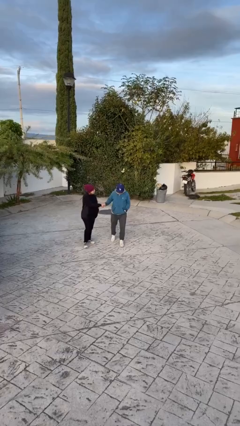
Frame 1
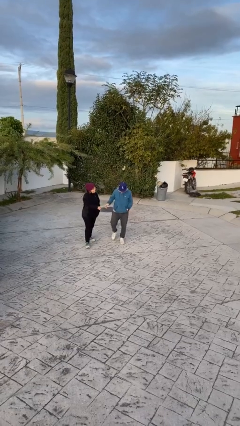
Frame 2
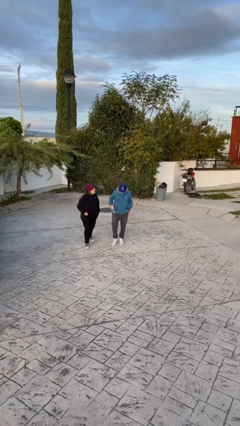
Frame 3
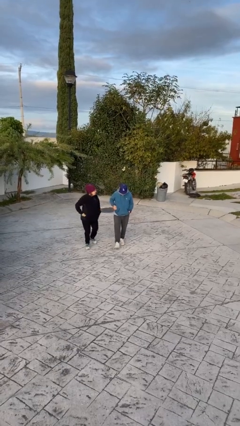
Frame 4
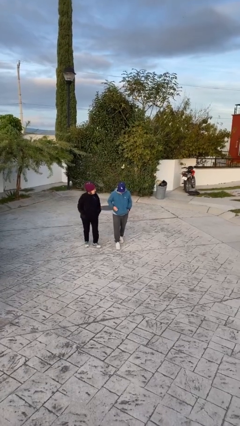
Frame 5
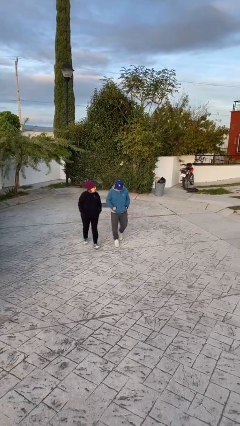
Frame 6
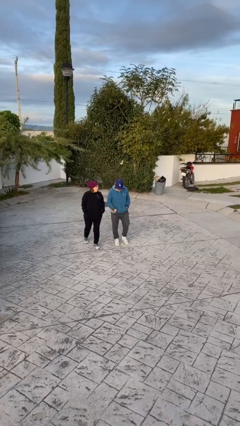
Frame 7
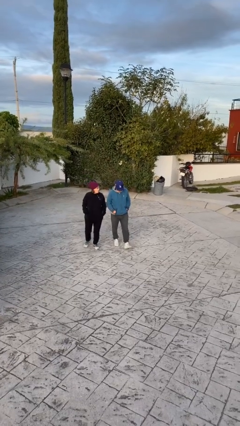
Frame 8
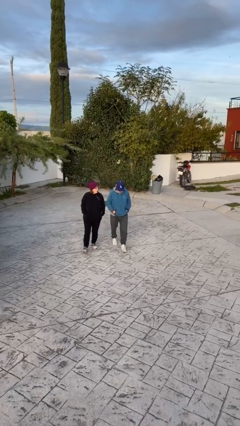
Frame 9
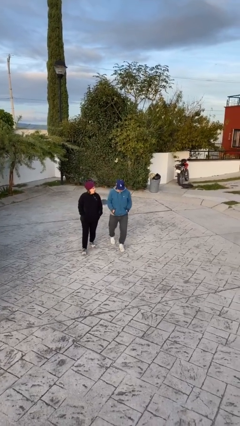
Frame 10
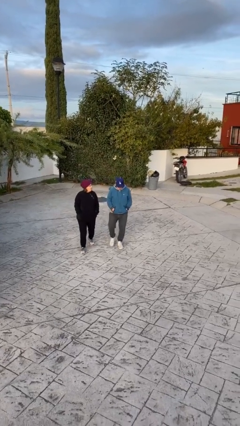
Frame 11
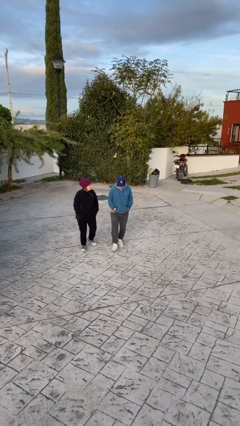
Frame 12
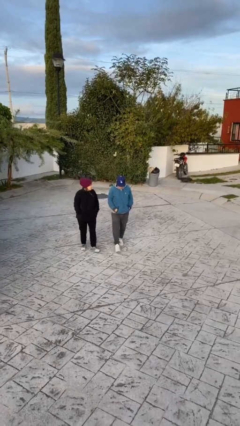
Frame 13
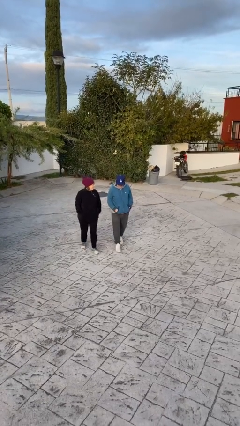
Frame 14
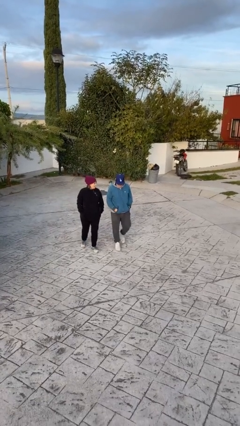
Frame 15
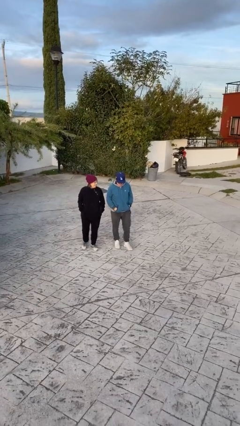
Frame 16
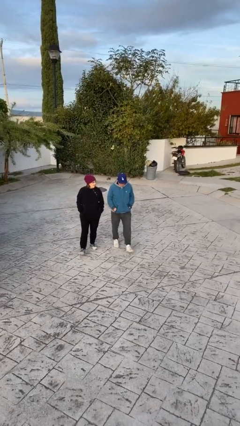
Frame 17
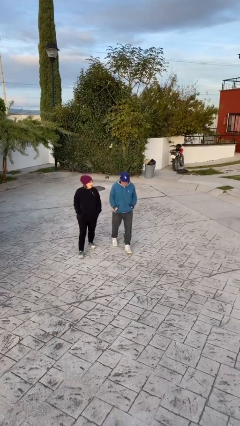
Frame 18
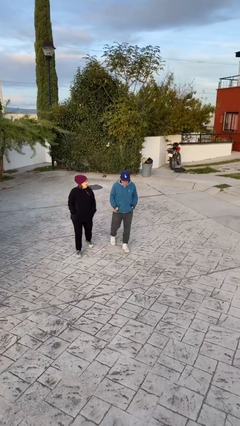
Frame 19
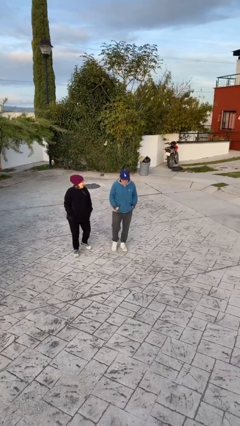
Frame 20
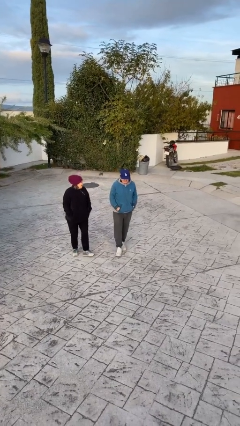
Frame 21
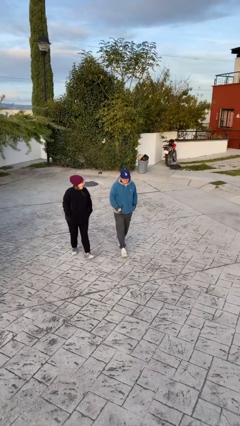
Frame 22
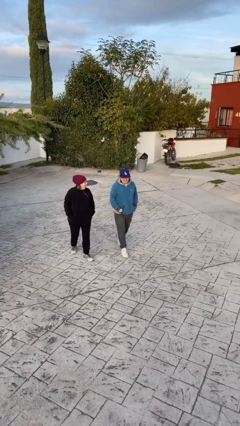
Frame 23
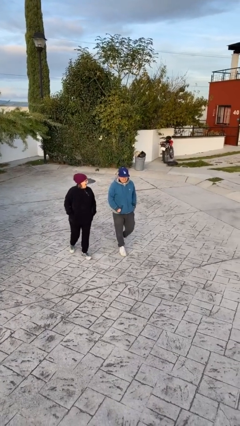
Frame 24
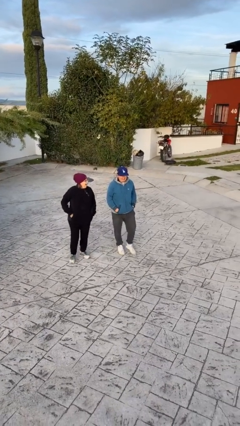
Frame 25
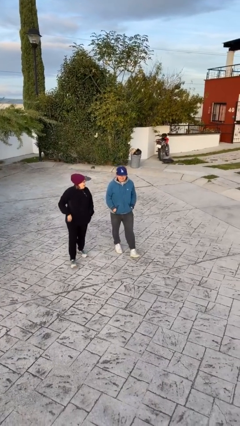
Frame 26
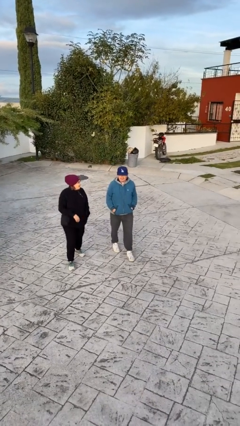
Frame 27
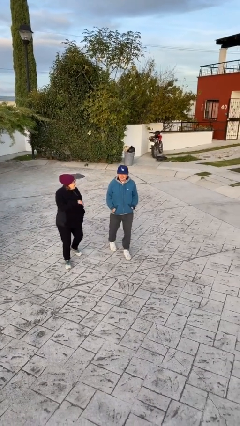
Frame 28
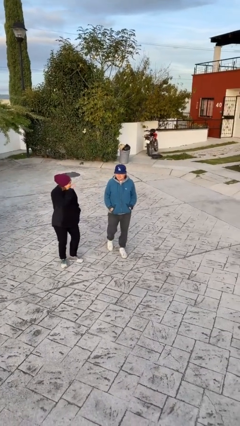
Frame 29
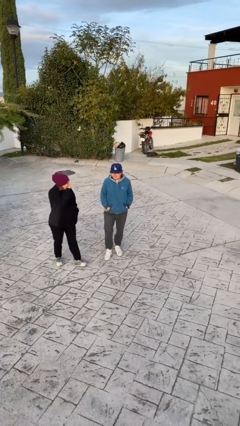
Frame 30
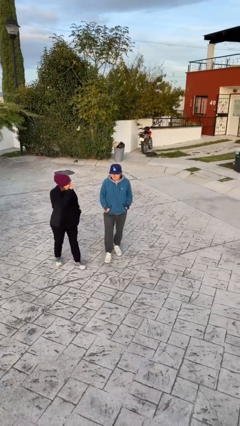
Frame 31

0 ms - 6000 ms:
person talks to person

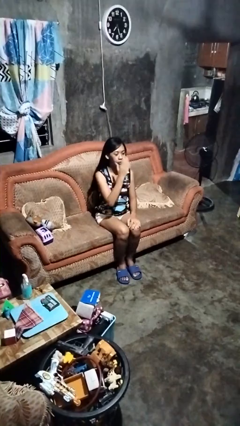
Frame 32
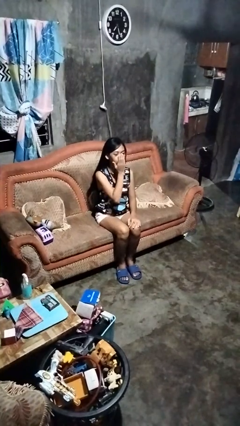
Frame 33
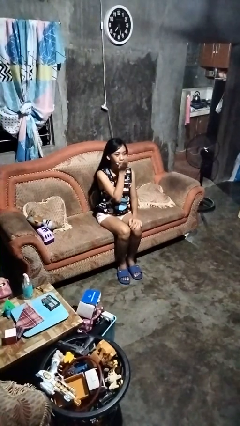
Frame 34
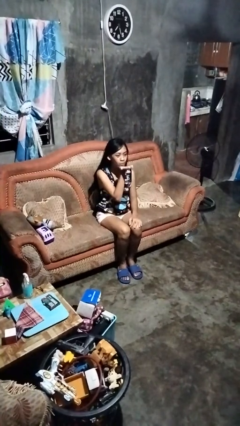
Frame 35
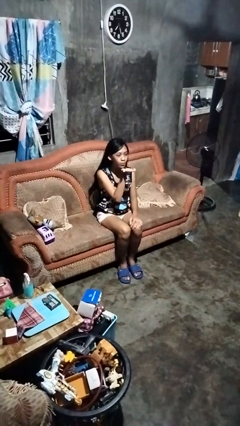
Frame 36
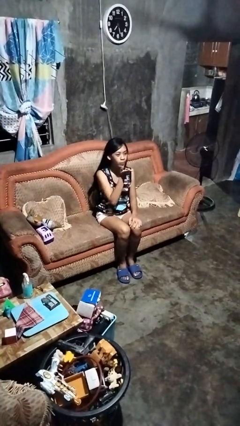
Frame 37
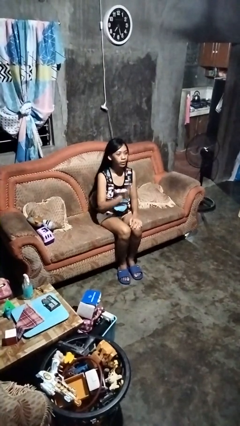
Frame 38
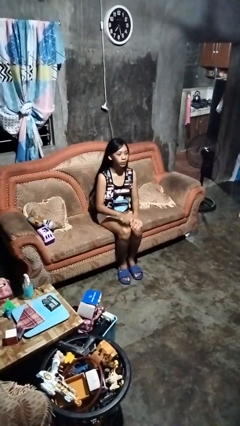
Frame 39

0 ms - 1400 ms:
person gestures blow kiss

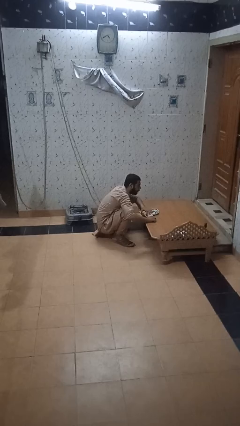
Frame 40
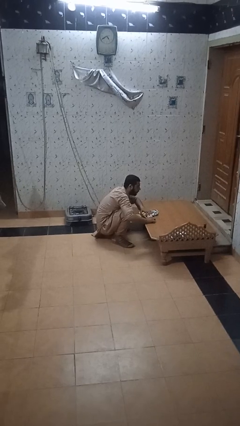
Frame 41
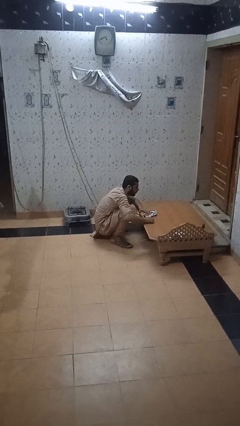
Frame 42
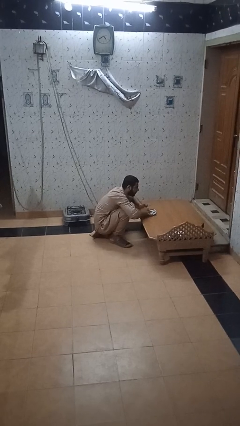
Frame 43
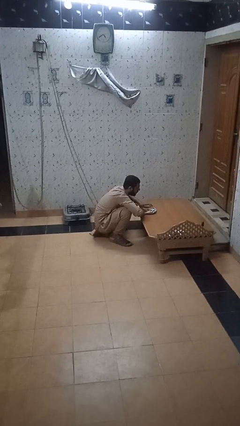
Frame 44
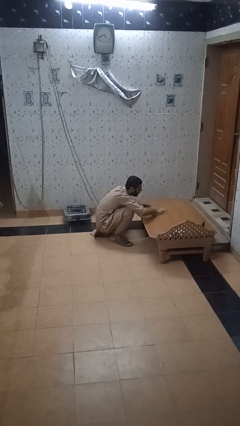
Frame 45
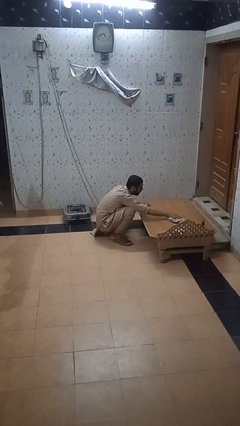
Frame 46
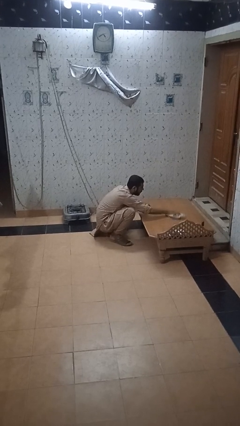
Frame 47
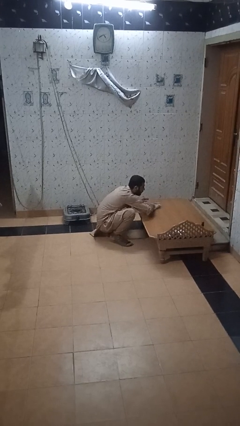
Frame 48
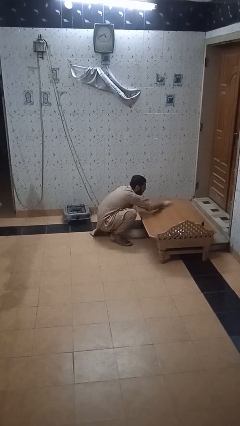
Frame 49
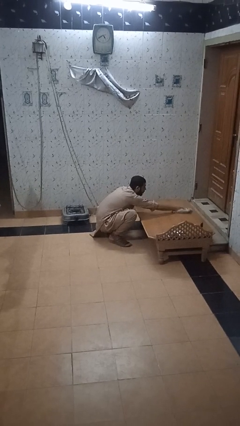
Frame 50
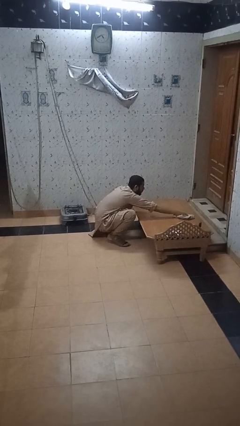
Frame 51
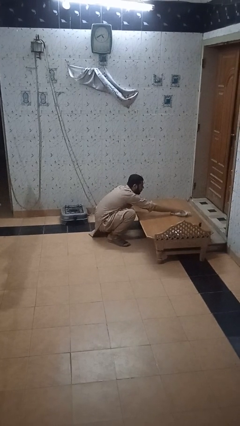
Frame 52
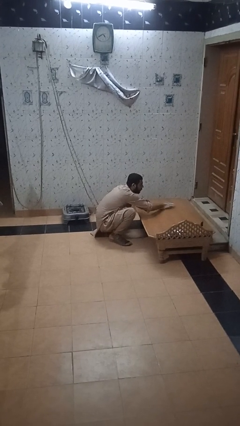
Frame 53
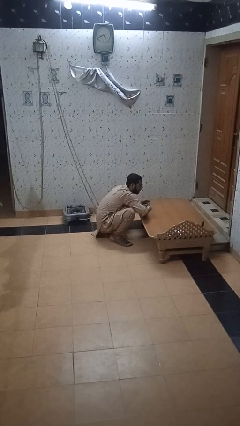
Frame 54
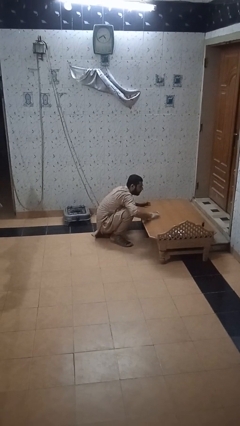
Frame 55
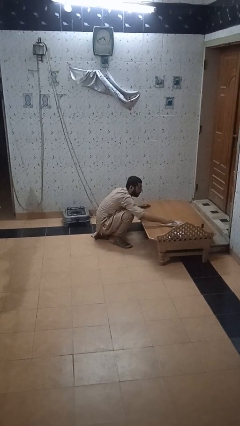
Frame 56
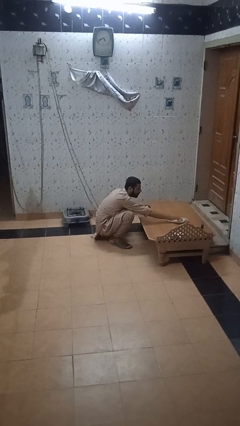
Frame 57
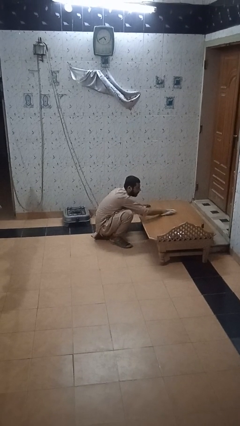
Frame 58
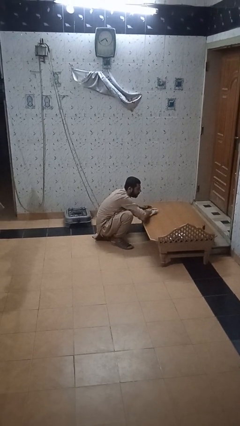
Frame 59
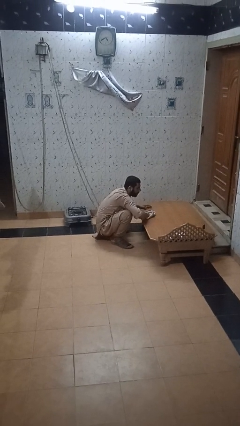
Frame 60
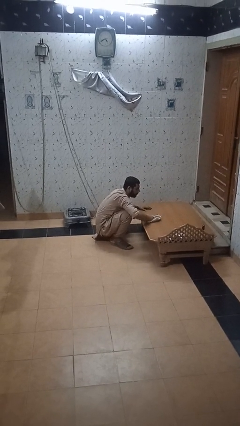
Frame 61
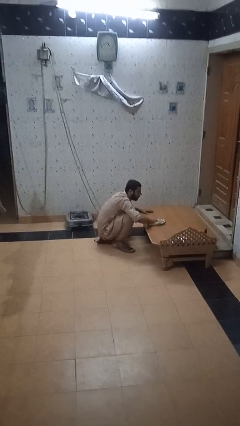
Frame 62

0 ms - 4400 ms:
person cleans table with rag

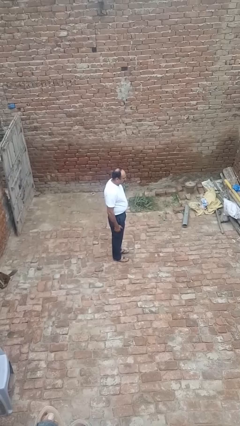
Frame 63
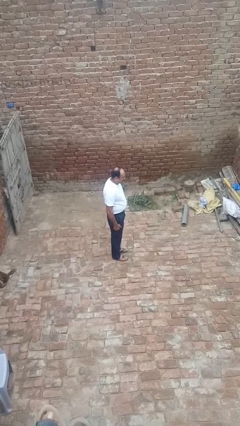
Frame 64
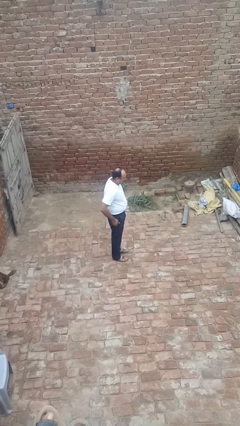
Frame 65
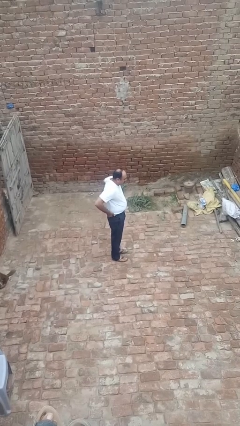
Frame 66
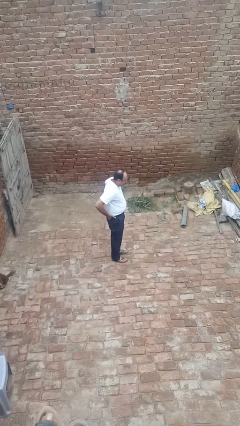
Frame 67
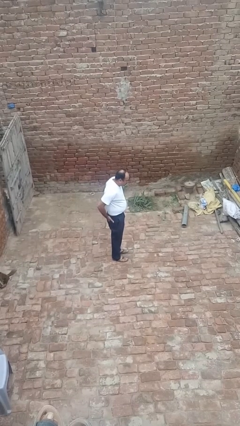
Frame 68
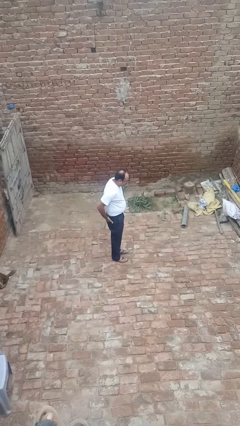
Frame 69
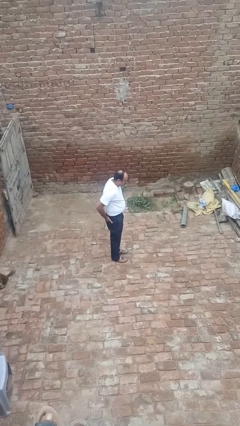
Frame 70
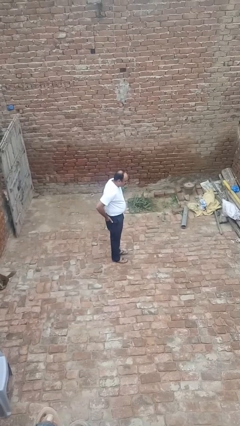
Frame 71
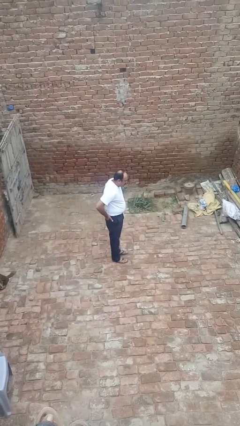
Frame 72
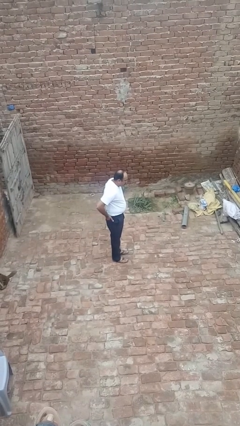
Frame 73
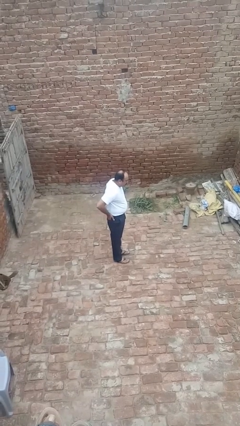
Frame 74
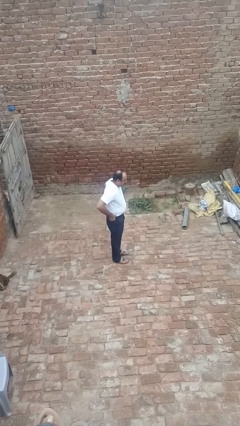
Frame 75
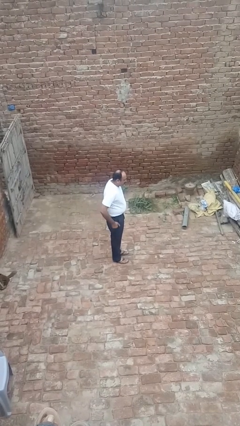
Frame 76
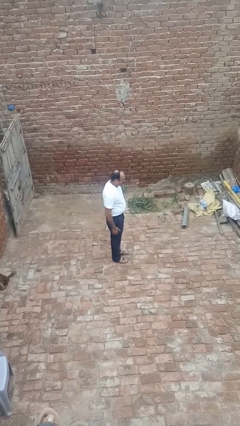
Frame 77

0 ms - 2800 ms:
person puts hands in back pockets

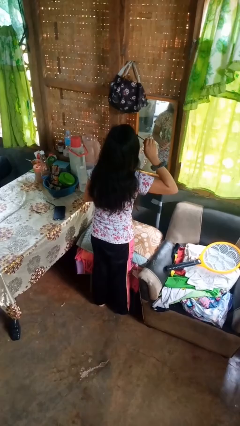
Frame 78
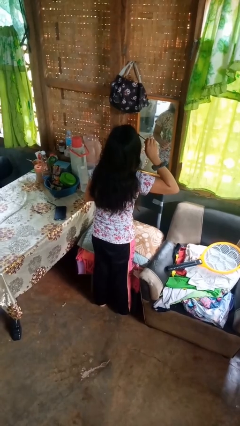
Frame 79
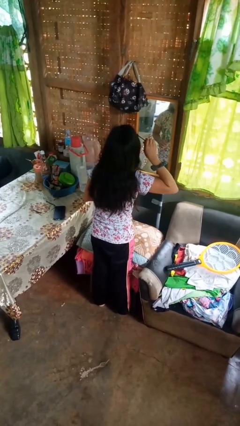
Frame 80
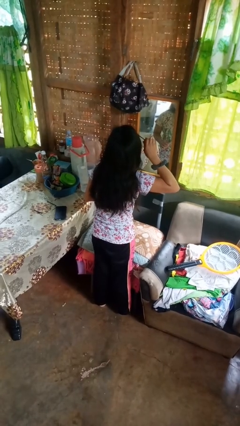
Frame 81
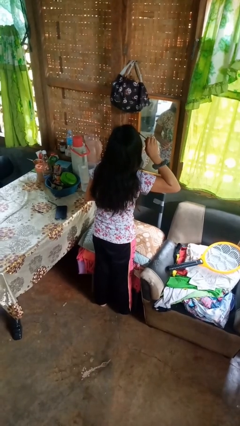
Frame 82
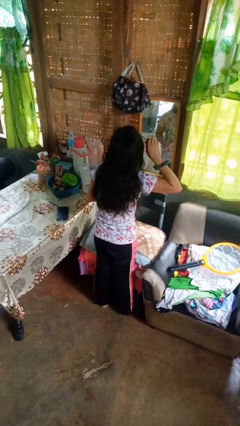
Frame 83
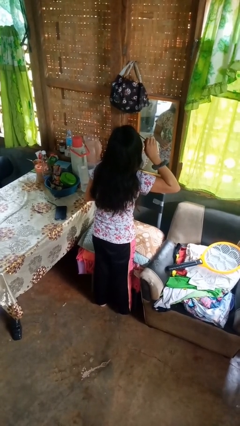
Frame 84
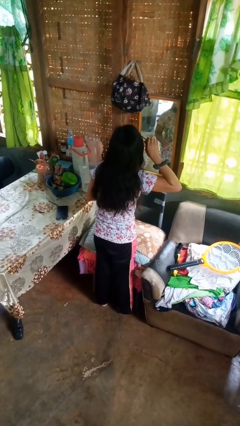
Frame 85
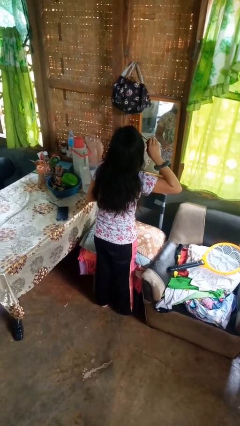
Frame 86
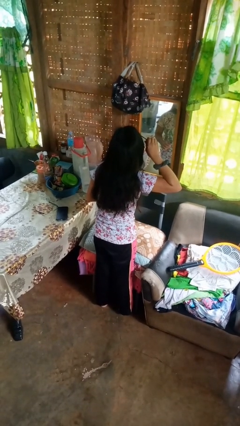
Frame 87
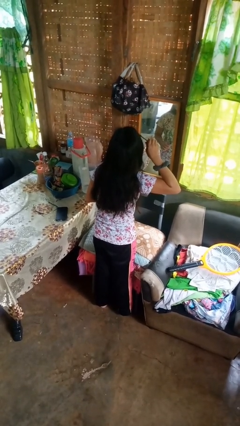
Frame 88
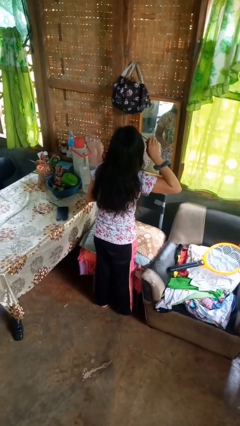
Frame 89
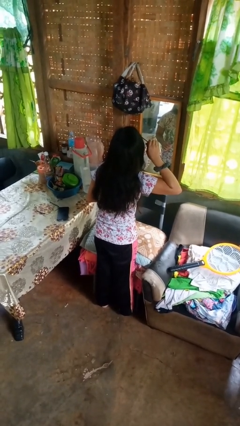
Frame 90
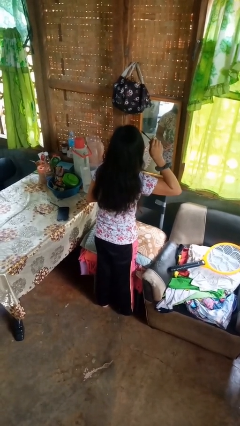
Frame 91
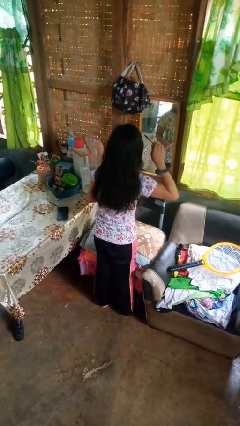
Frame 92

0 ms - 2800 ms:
person applies eye makeup

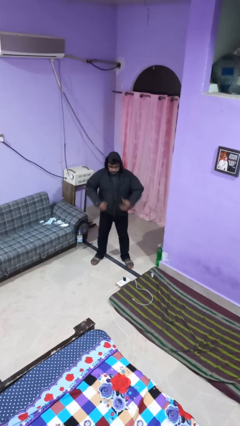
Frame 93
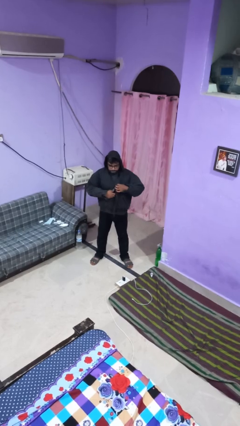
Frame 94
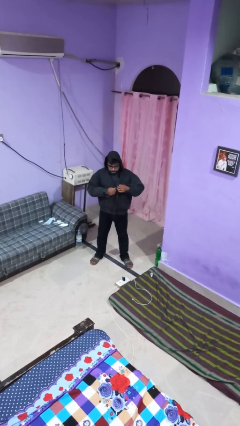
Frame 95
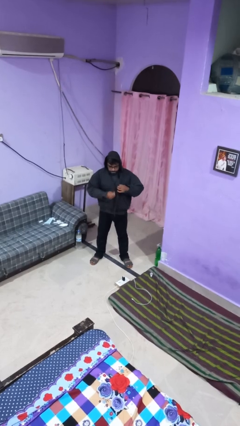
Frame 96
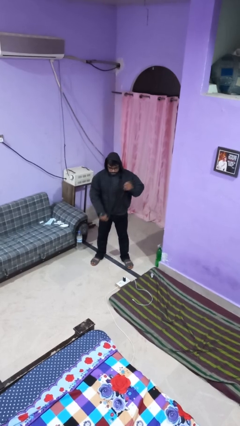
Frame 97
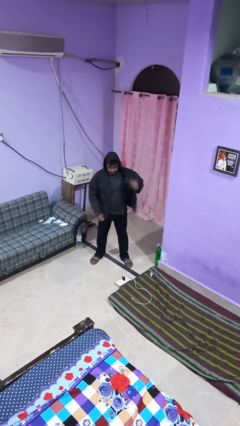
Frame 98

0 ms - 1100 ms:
person unzips jacket
